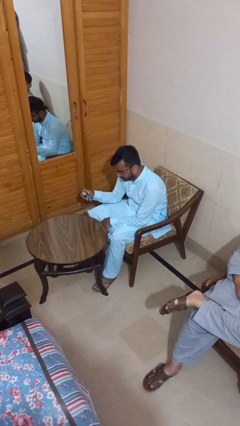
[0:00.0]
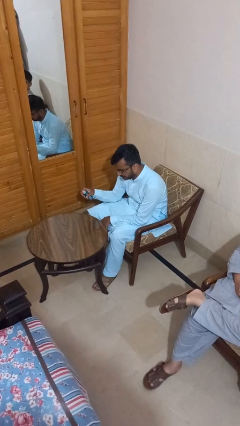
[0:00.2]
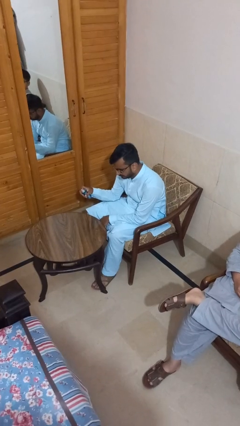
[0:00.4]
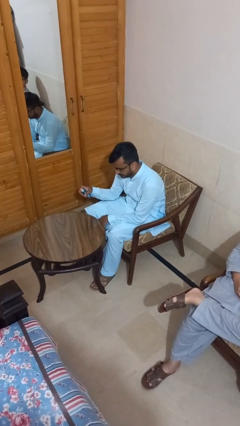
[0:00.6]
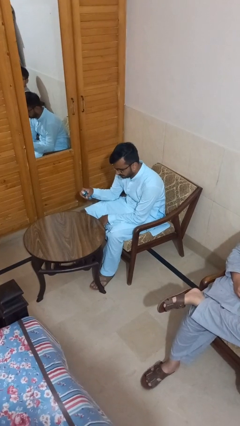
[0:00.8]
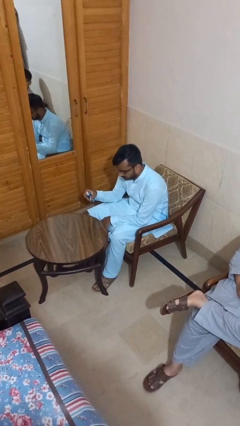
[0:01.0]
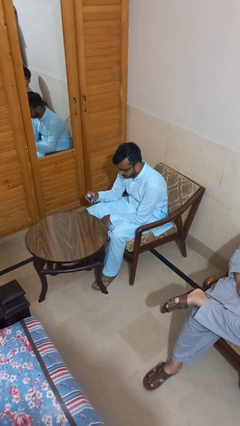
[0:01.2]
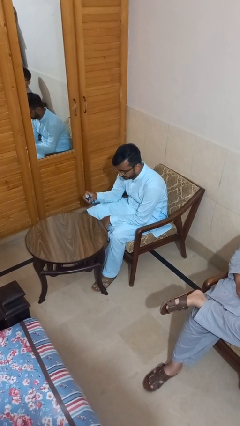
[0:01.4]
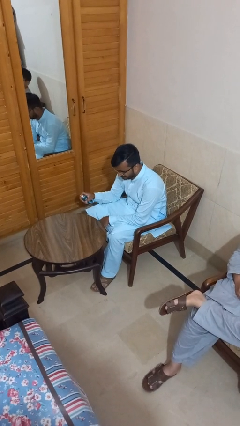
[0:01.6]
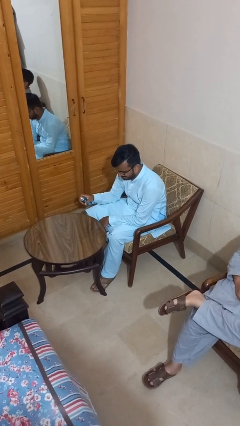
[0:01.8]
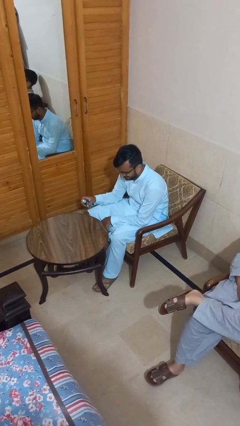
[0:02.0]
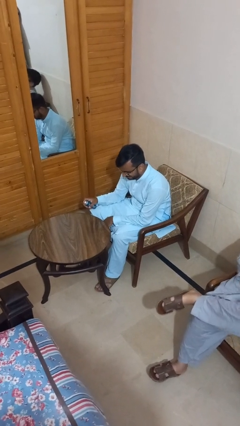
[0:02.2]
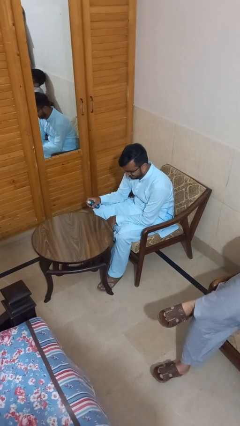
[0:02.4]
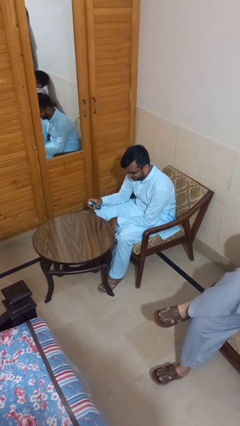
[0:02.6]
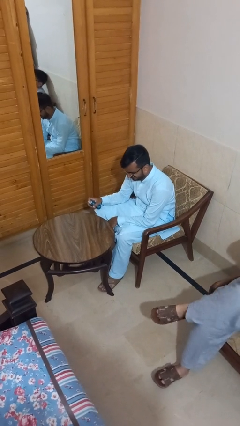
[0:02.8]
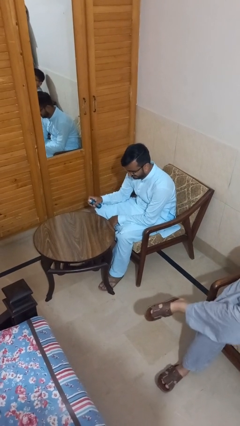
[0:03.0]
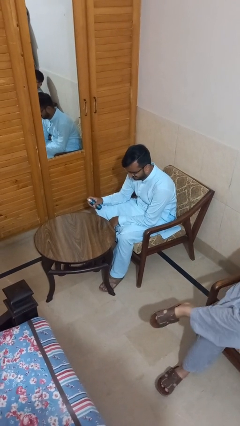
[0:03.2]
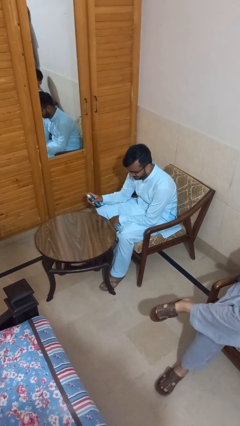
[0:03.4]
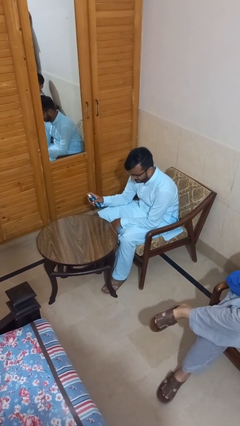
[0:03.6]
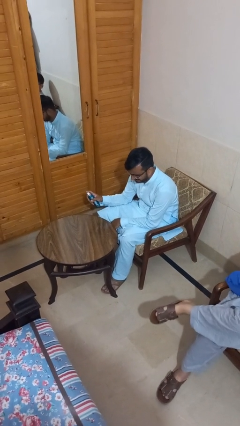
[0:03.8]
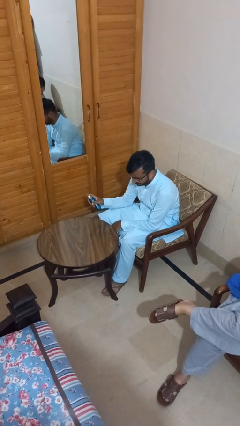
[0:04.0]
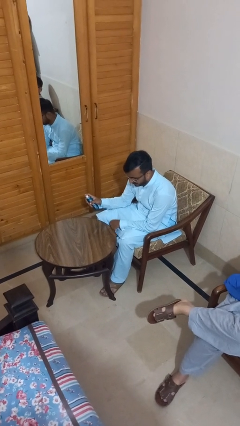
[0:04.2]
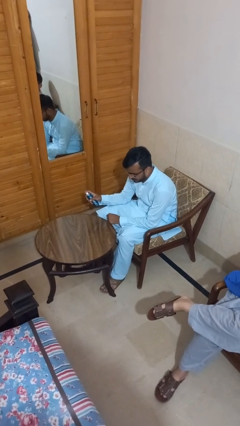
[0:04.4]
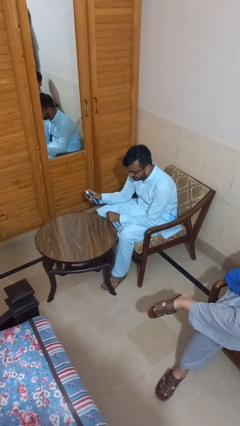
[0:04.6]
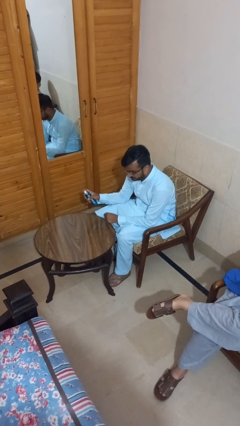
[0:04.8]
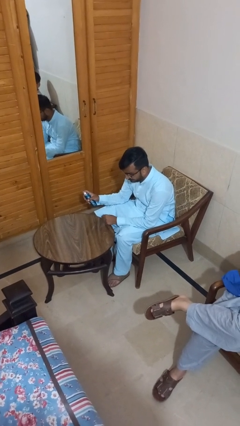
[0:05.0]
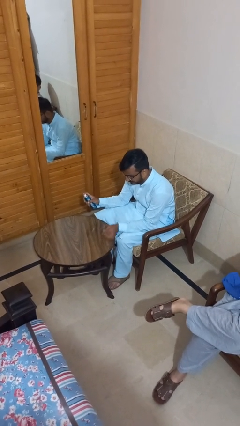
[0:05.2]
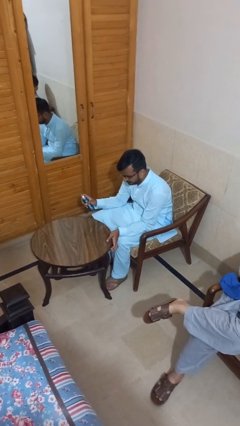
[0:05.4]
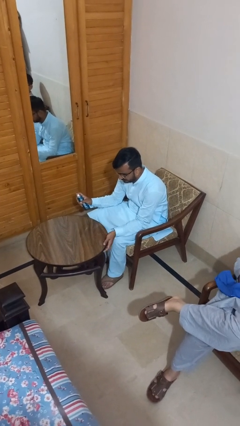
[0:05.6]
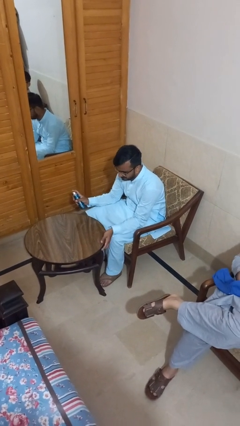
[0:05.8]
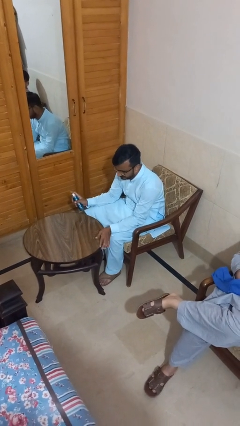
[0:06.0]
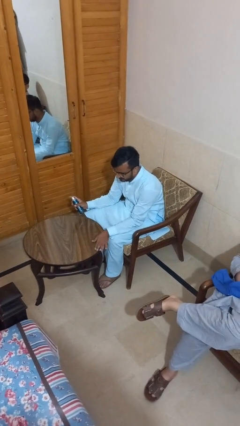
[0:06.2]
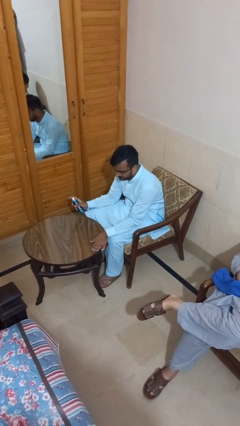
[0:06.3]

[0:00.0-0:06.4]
person sprays from bottle

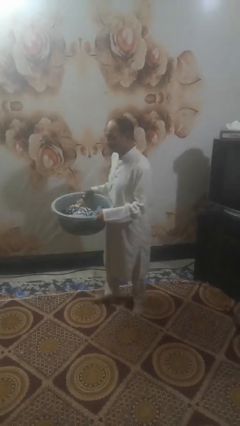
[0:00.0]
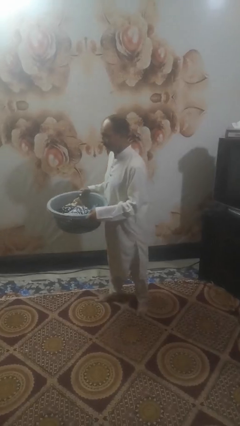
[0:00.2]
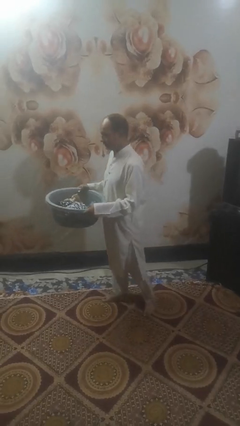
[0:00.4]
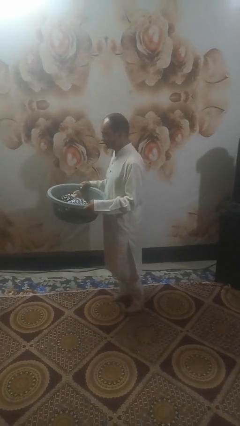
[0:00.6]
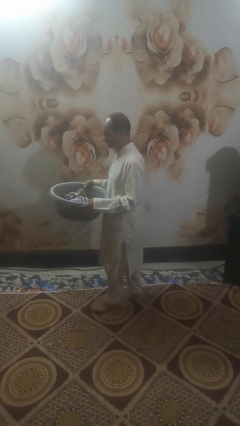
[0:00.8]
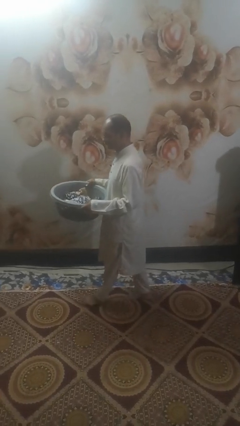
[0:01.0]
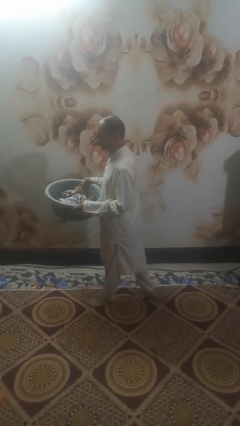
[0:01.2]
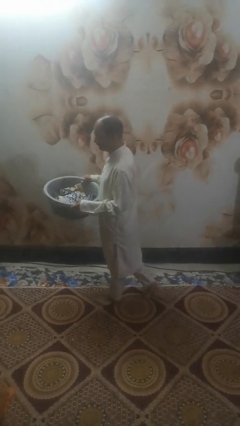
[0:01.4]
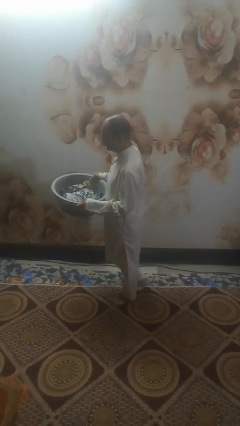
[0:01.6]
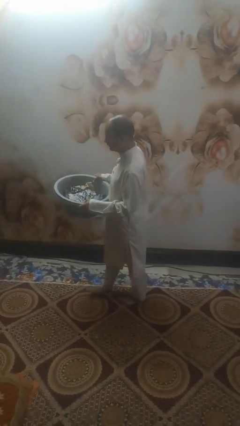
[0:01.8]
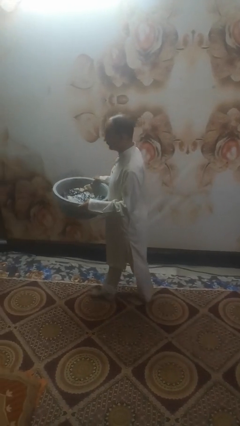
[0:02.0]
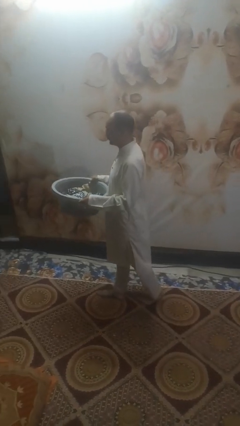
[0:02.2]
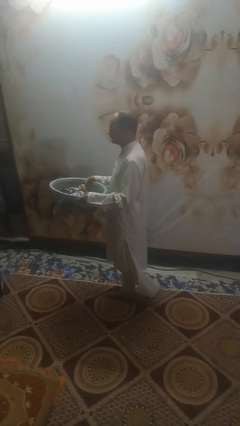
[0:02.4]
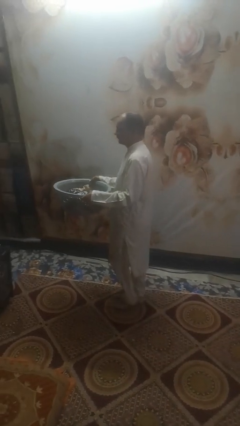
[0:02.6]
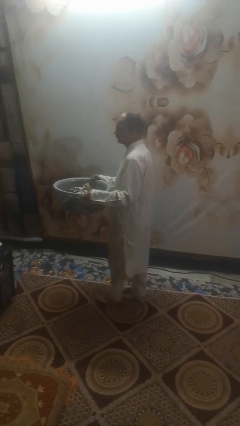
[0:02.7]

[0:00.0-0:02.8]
person carries laundry basket

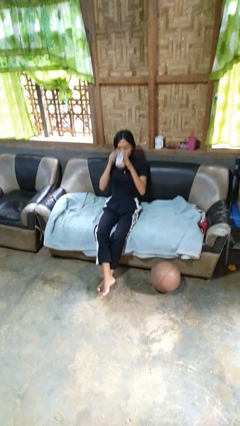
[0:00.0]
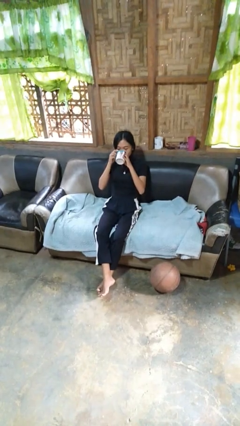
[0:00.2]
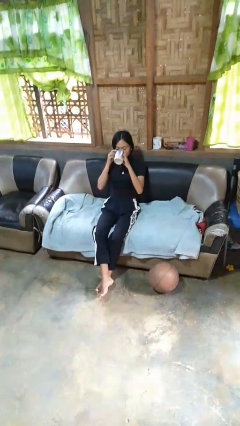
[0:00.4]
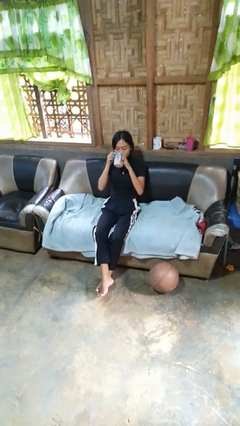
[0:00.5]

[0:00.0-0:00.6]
person drinks from mug

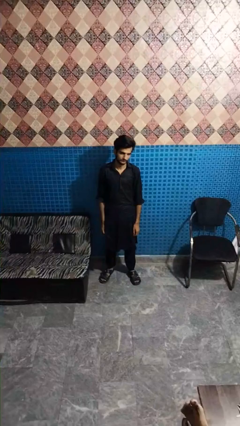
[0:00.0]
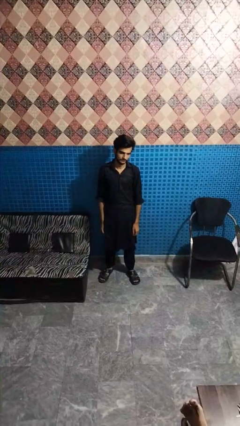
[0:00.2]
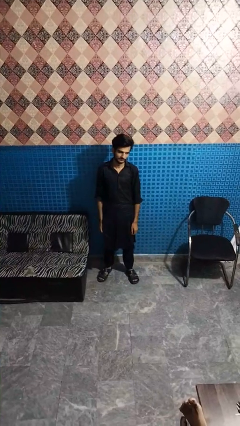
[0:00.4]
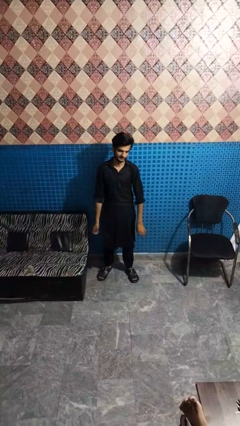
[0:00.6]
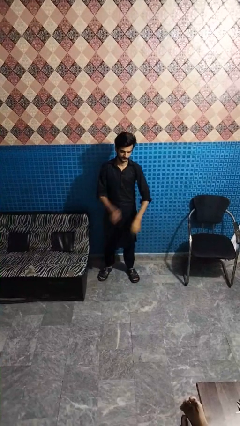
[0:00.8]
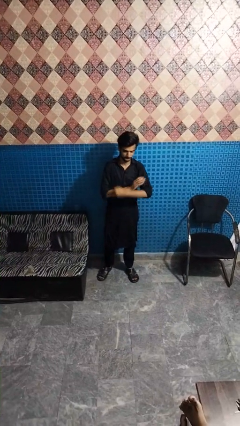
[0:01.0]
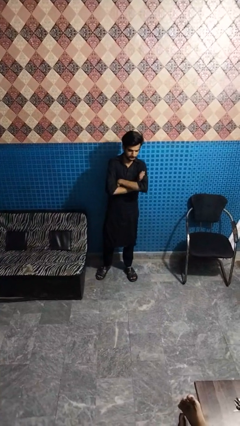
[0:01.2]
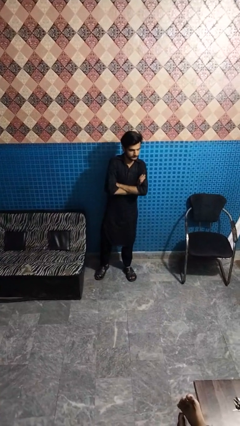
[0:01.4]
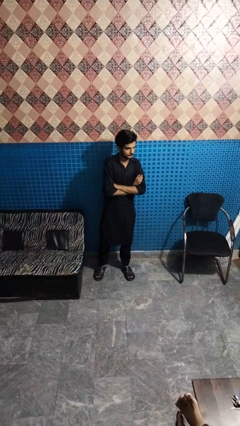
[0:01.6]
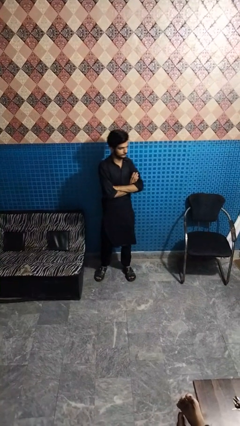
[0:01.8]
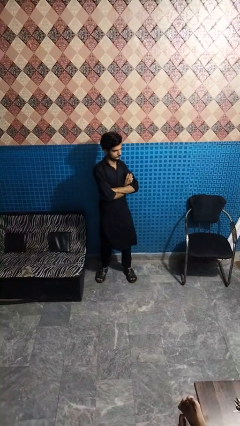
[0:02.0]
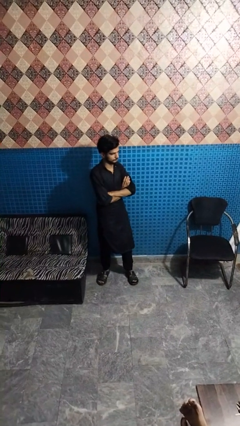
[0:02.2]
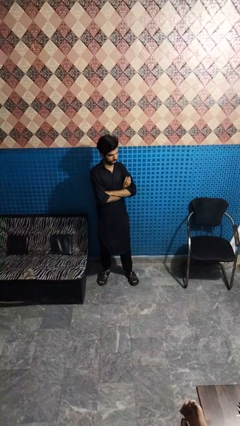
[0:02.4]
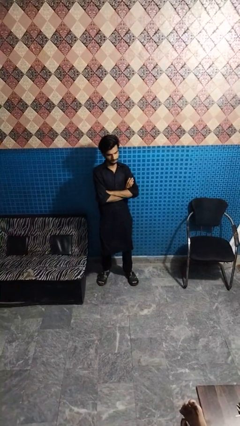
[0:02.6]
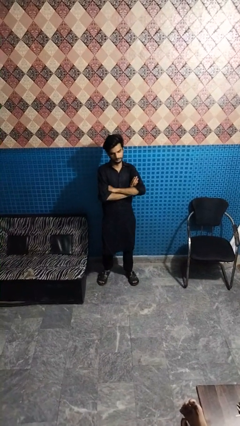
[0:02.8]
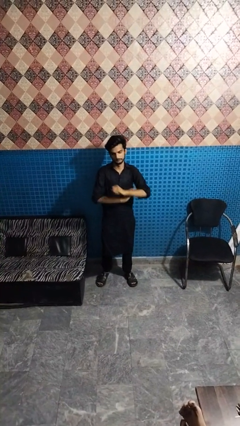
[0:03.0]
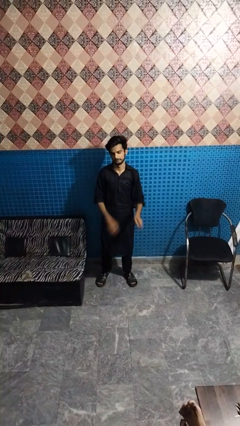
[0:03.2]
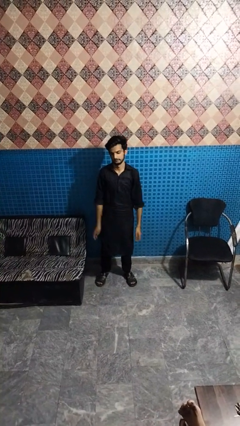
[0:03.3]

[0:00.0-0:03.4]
person crosses arms

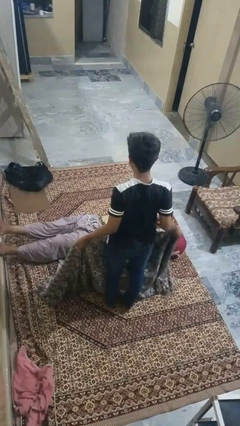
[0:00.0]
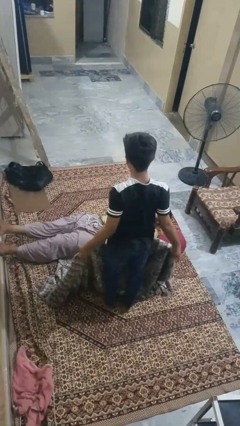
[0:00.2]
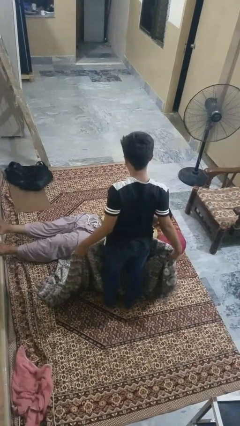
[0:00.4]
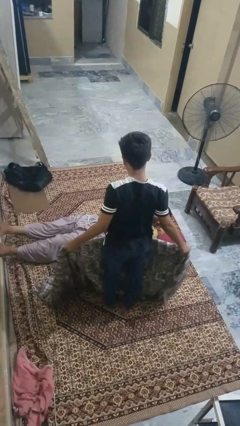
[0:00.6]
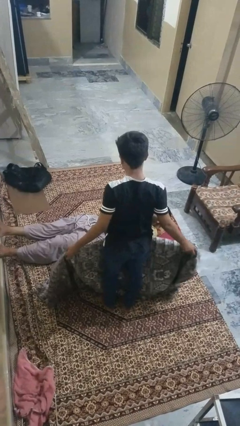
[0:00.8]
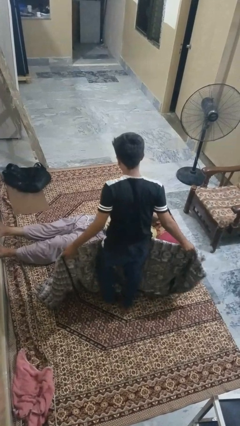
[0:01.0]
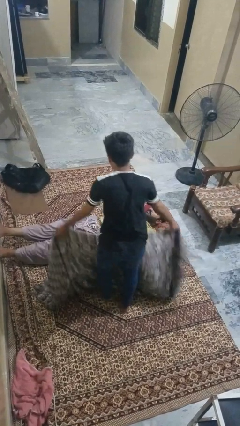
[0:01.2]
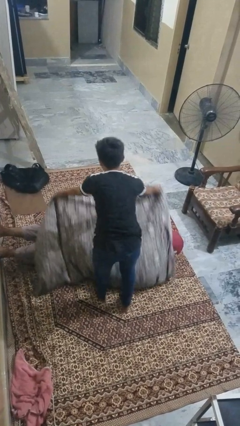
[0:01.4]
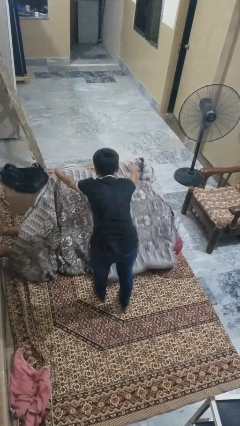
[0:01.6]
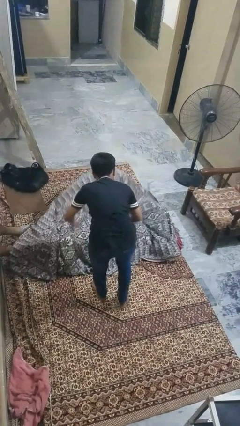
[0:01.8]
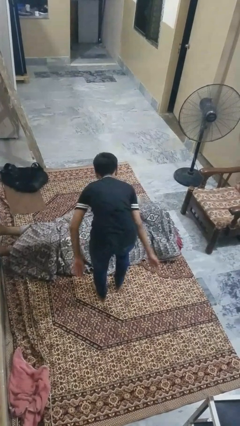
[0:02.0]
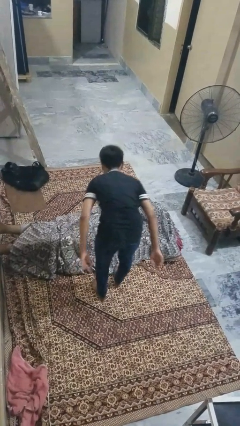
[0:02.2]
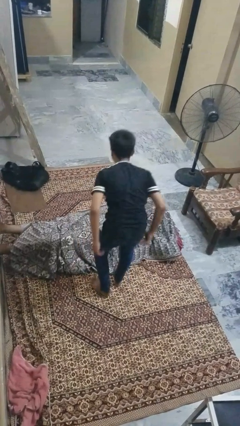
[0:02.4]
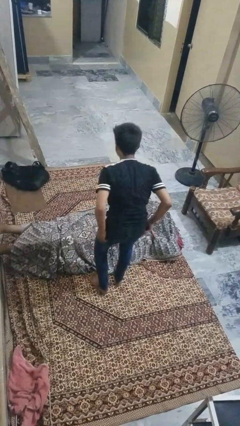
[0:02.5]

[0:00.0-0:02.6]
person covers friend with blanket

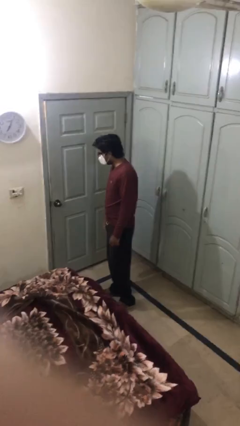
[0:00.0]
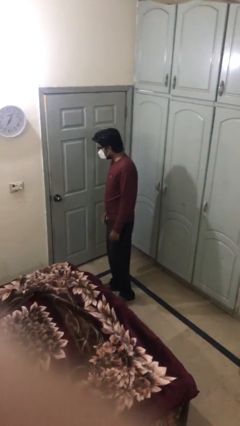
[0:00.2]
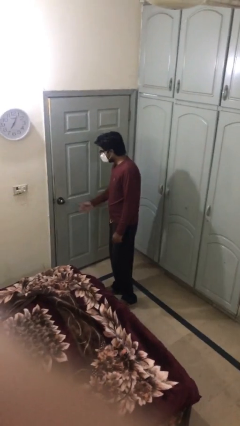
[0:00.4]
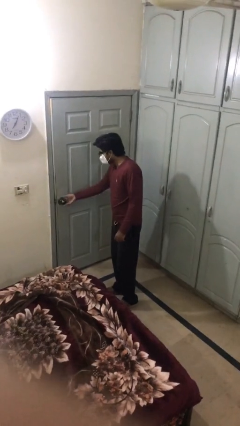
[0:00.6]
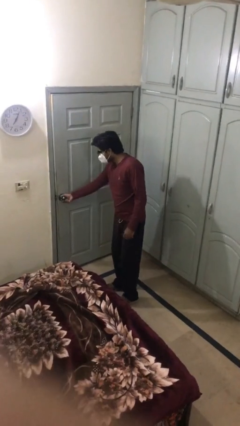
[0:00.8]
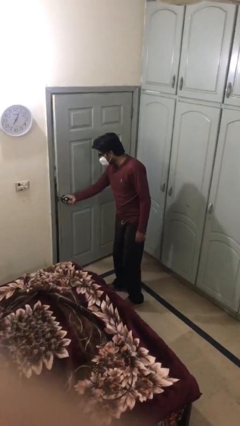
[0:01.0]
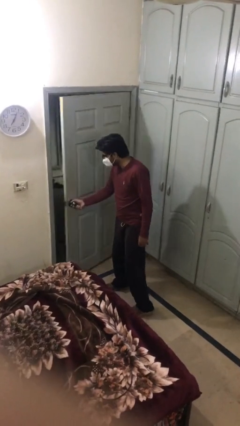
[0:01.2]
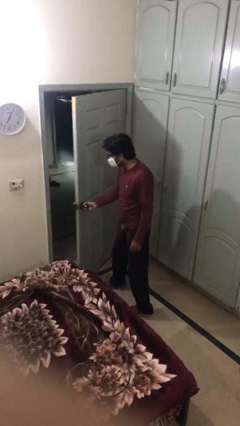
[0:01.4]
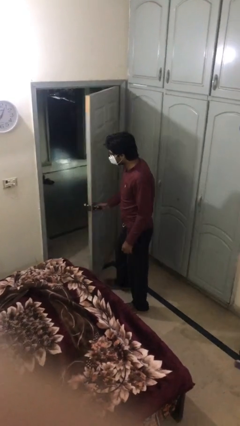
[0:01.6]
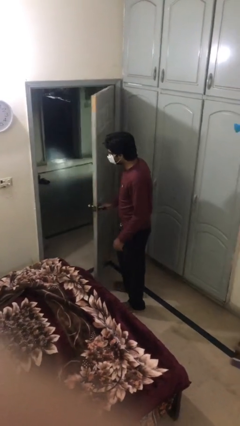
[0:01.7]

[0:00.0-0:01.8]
person opens facility door
